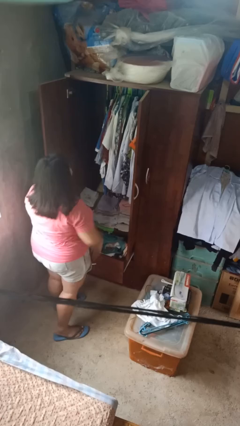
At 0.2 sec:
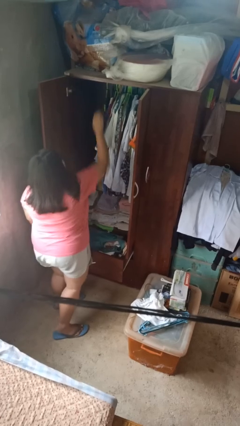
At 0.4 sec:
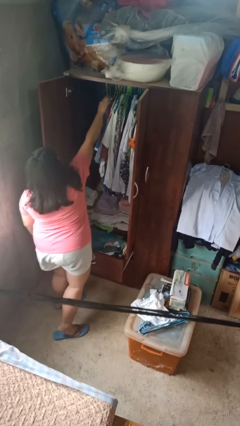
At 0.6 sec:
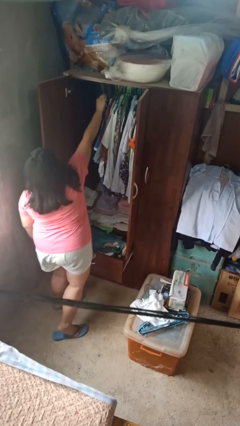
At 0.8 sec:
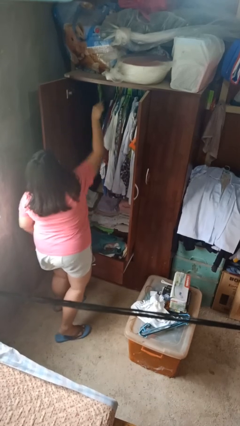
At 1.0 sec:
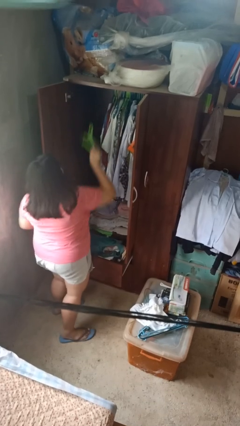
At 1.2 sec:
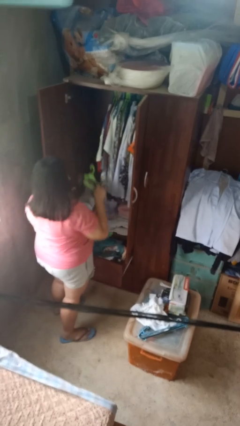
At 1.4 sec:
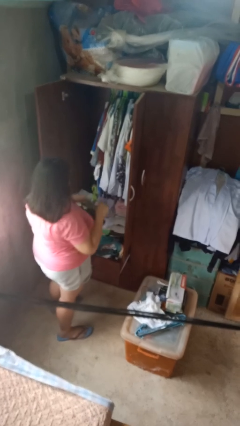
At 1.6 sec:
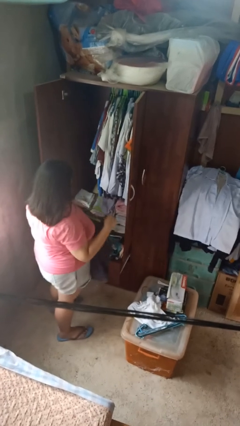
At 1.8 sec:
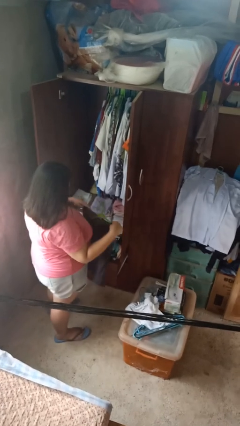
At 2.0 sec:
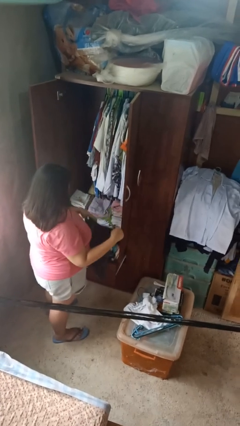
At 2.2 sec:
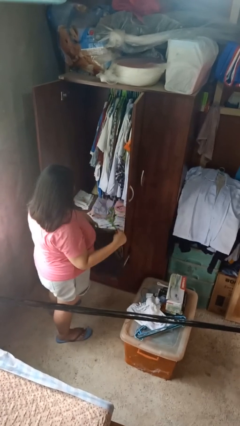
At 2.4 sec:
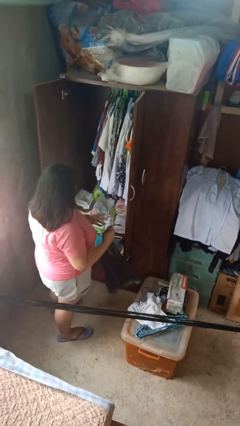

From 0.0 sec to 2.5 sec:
person takes clothes from closet

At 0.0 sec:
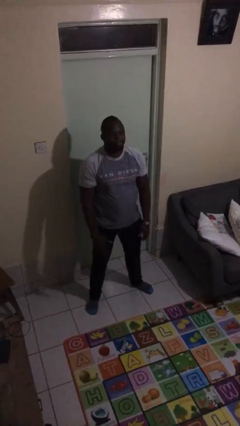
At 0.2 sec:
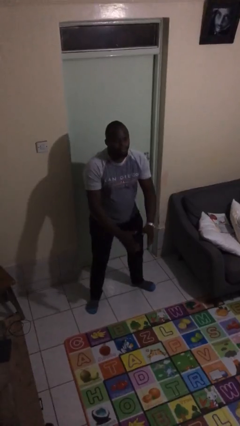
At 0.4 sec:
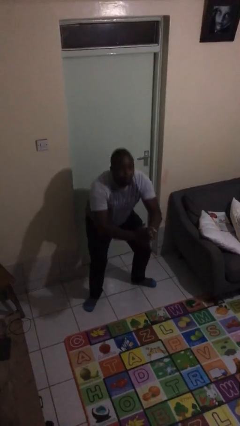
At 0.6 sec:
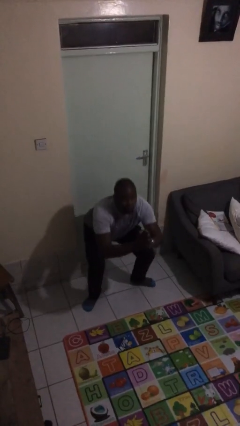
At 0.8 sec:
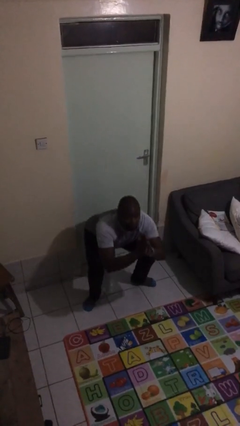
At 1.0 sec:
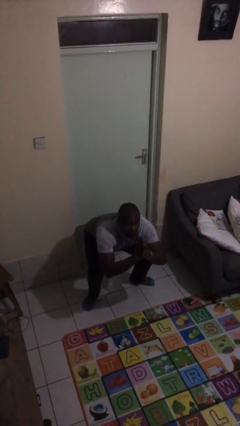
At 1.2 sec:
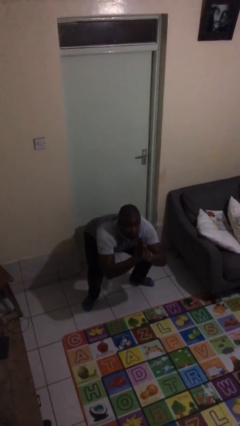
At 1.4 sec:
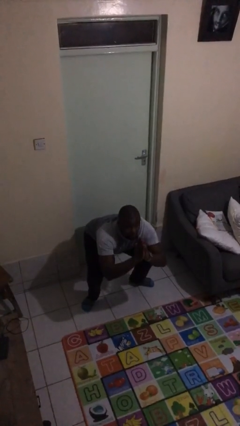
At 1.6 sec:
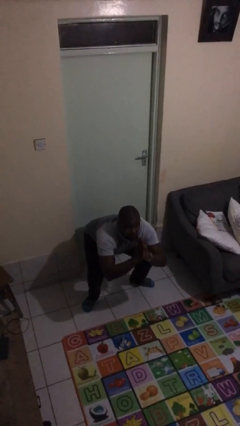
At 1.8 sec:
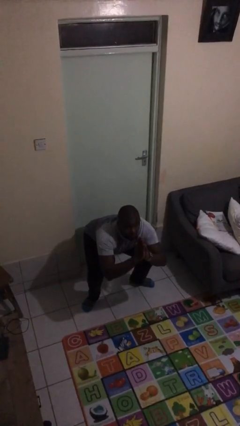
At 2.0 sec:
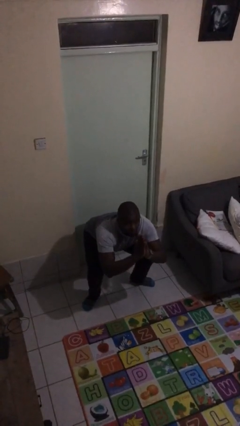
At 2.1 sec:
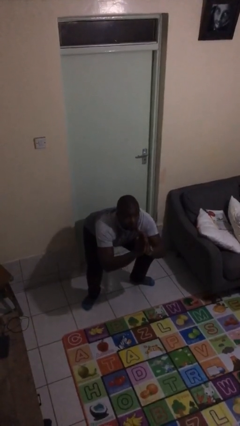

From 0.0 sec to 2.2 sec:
person squats

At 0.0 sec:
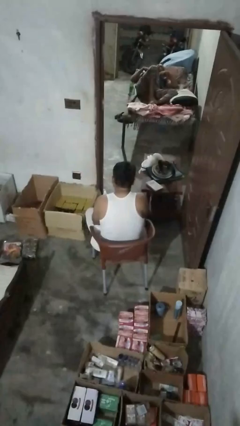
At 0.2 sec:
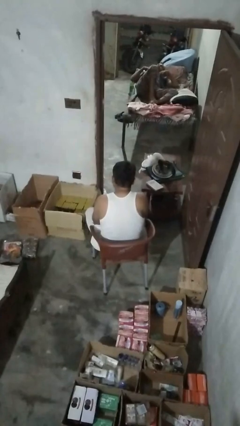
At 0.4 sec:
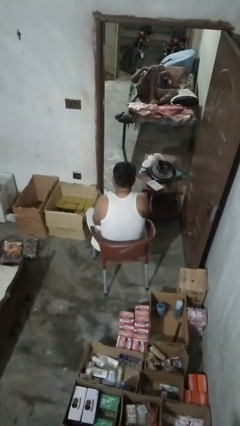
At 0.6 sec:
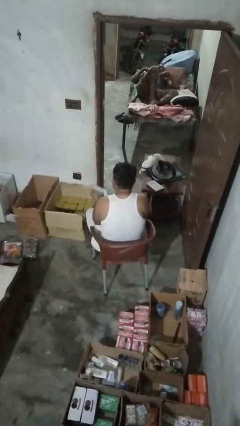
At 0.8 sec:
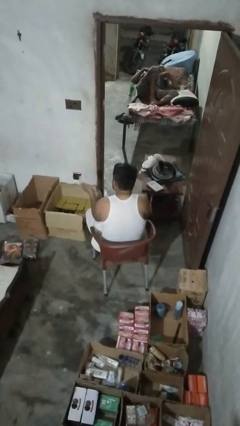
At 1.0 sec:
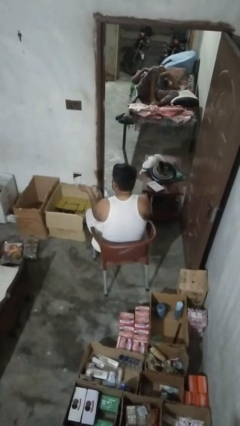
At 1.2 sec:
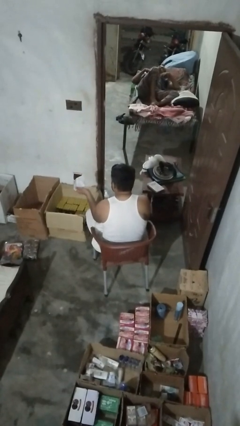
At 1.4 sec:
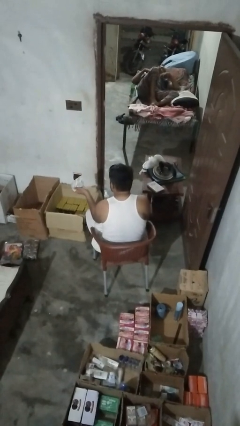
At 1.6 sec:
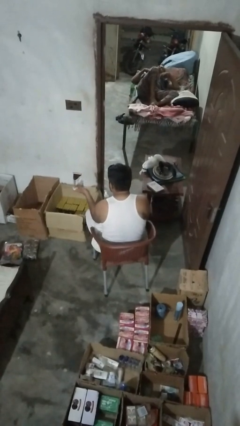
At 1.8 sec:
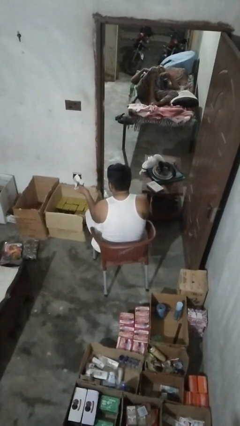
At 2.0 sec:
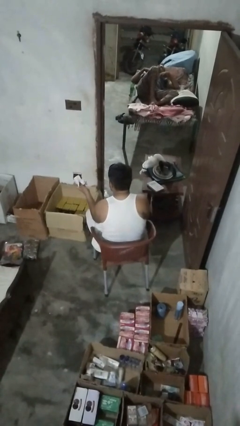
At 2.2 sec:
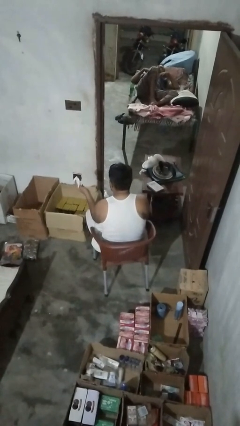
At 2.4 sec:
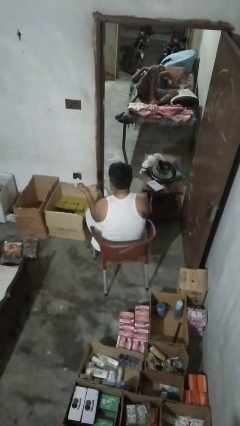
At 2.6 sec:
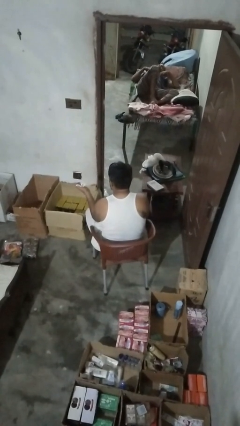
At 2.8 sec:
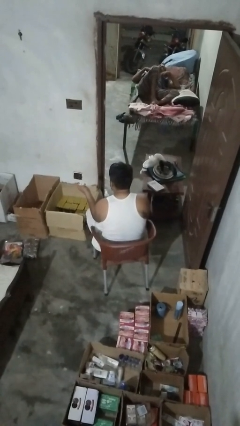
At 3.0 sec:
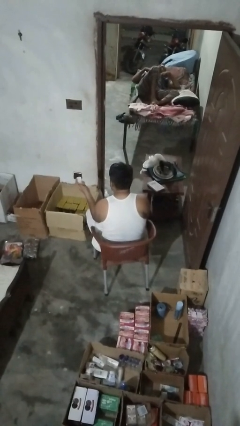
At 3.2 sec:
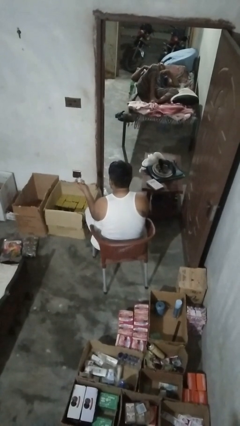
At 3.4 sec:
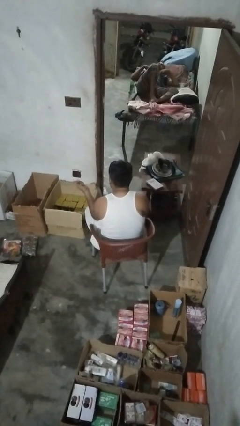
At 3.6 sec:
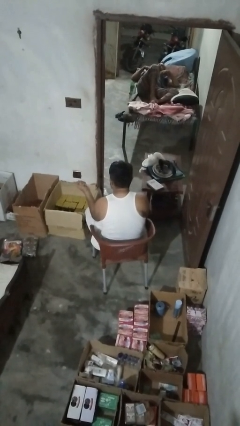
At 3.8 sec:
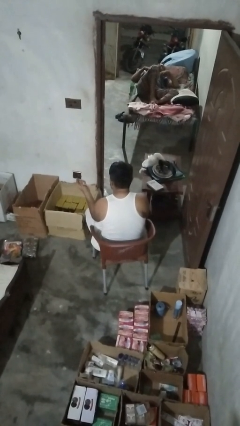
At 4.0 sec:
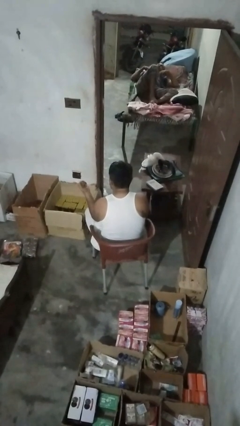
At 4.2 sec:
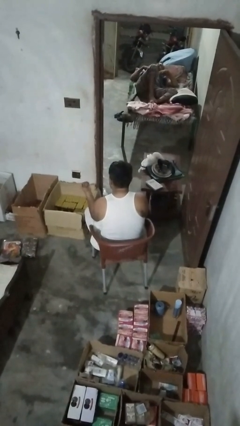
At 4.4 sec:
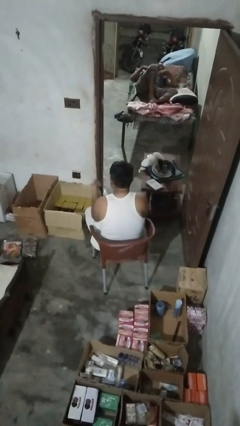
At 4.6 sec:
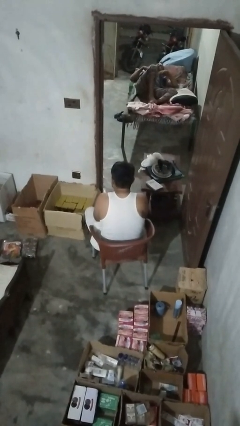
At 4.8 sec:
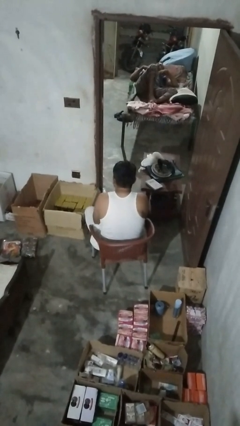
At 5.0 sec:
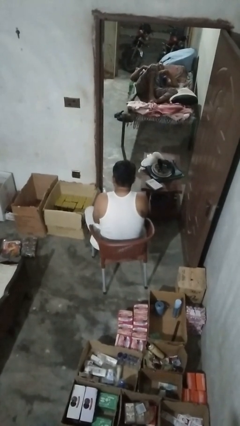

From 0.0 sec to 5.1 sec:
person crumples paper

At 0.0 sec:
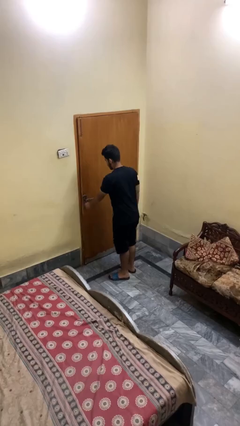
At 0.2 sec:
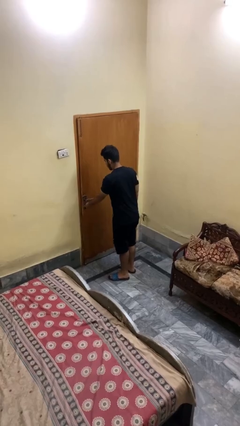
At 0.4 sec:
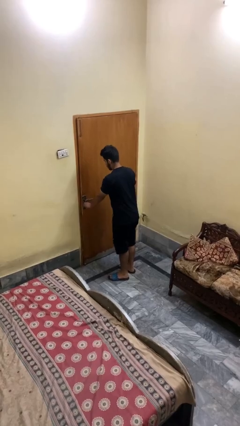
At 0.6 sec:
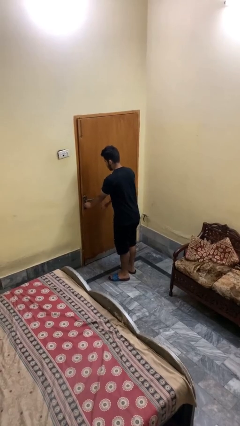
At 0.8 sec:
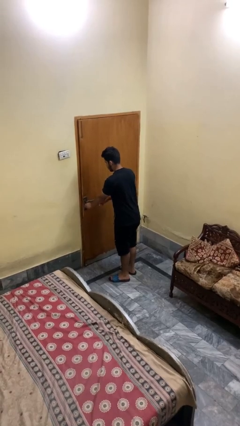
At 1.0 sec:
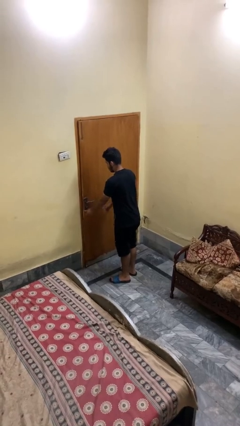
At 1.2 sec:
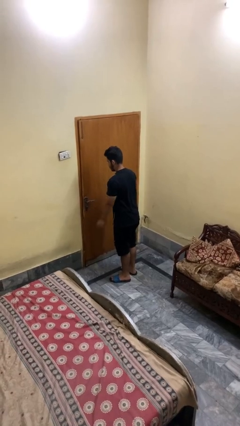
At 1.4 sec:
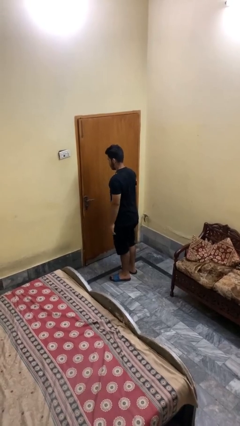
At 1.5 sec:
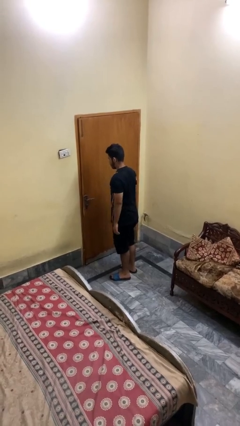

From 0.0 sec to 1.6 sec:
person locks door with keys

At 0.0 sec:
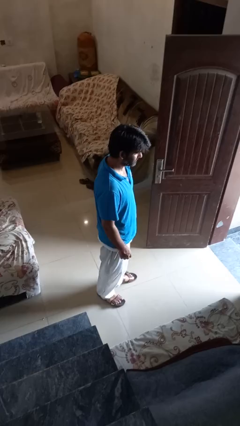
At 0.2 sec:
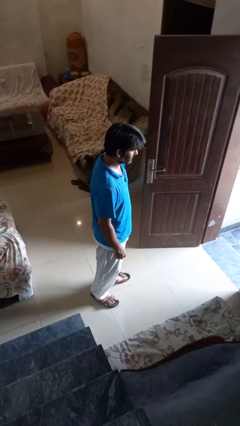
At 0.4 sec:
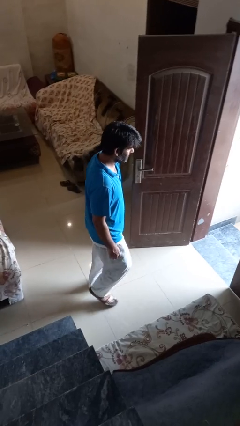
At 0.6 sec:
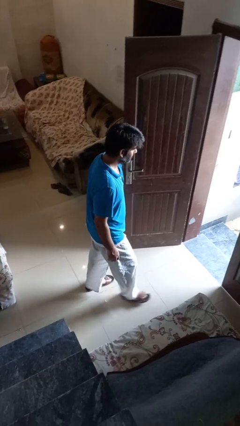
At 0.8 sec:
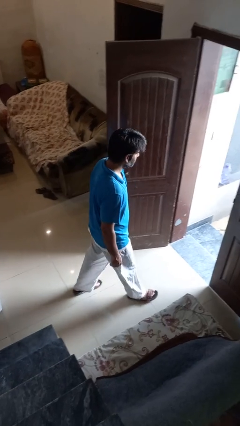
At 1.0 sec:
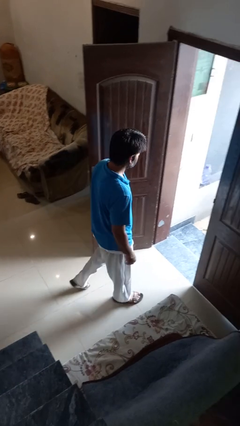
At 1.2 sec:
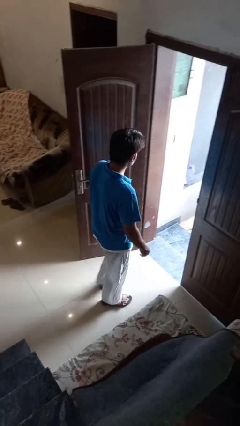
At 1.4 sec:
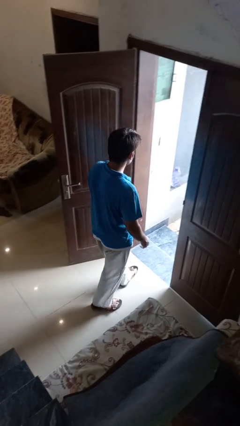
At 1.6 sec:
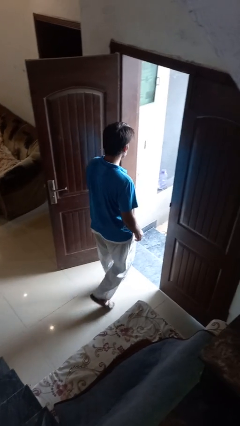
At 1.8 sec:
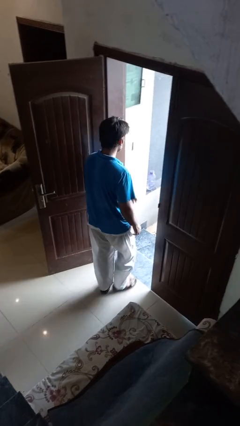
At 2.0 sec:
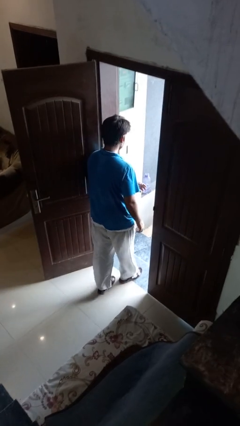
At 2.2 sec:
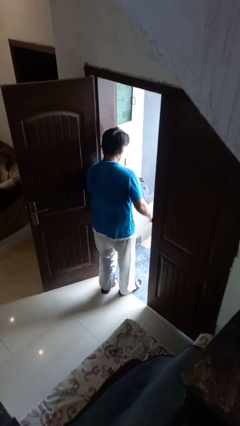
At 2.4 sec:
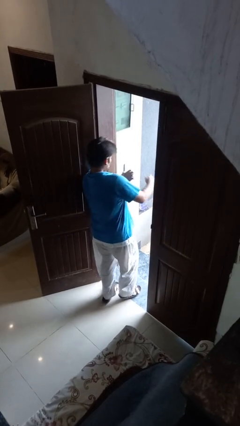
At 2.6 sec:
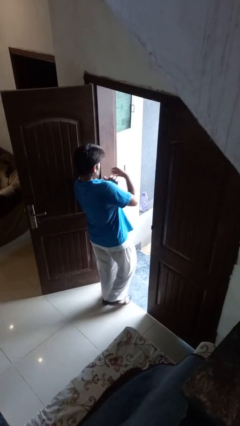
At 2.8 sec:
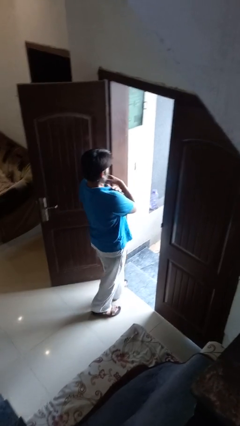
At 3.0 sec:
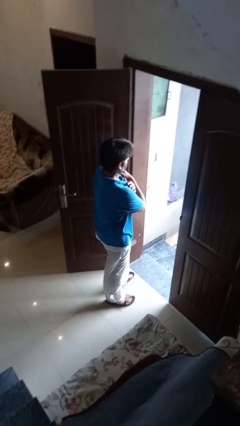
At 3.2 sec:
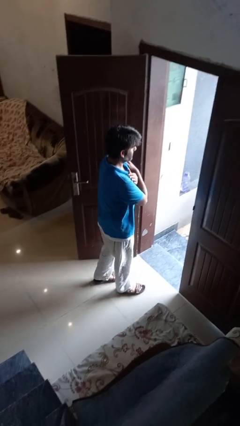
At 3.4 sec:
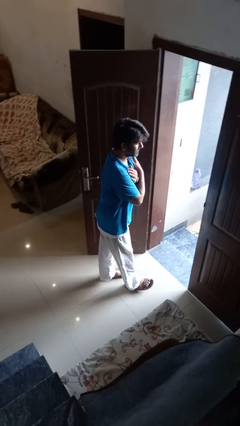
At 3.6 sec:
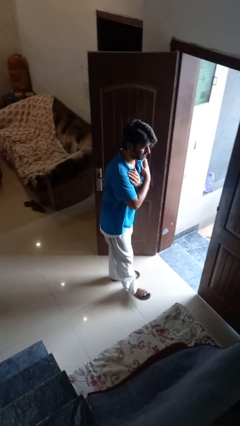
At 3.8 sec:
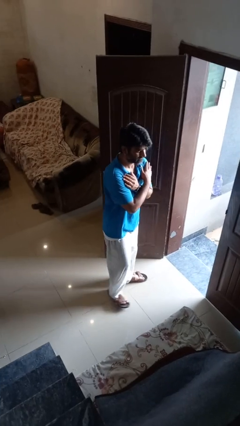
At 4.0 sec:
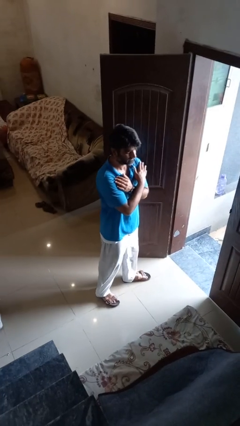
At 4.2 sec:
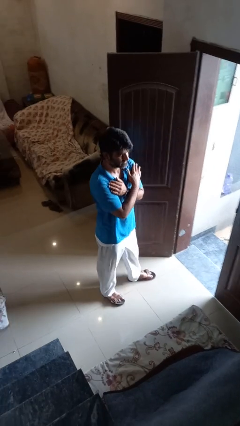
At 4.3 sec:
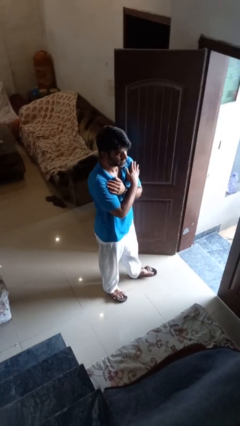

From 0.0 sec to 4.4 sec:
person bumps into wall

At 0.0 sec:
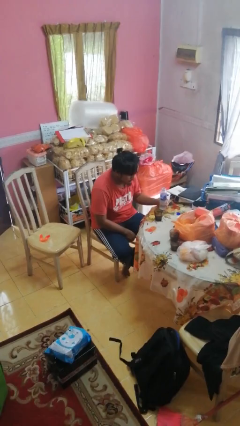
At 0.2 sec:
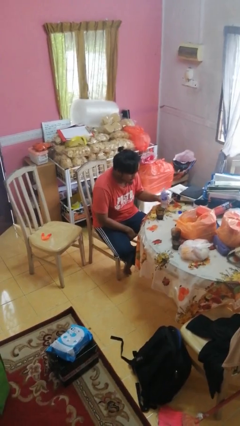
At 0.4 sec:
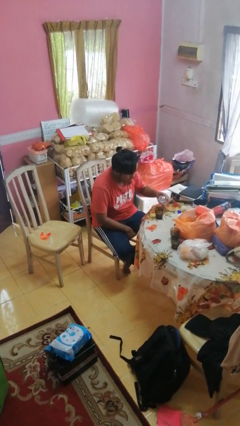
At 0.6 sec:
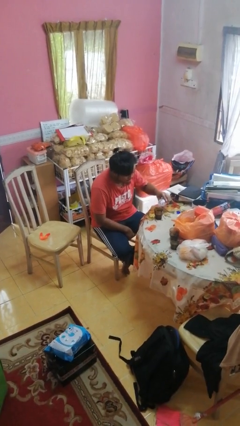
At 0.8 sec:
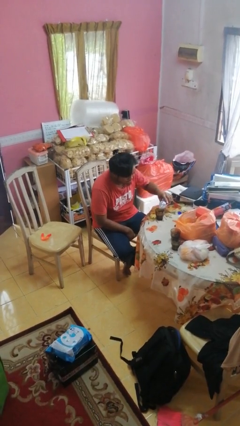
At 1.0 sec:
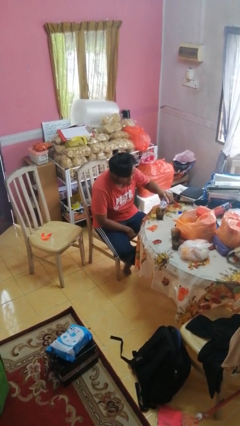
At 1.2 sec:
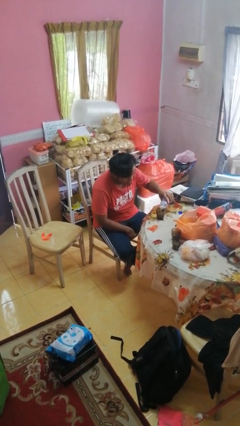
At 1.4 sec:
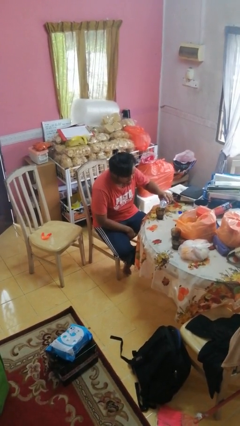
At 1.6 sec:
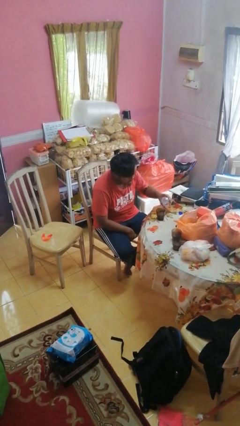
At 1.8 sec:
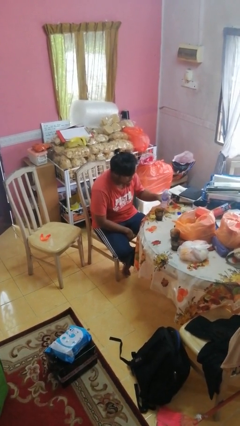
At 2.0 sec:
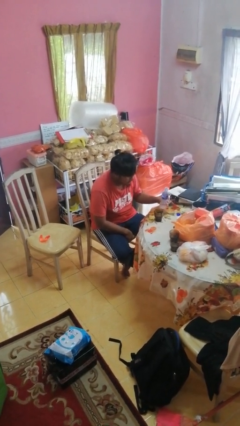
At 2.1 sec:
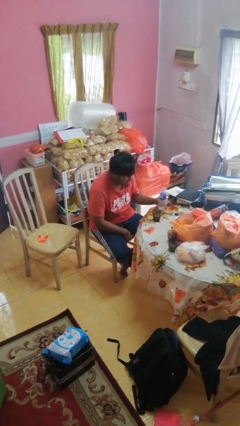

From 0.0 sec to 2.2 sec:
person pours liquid into cup
